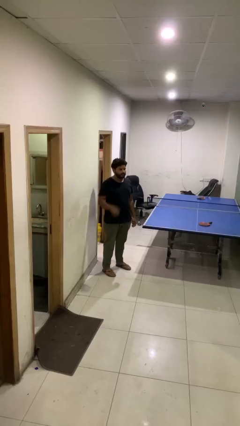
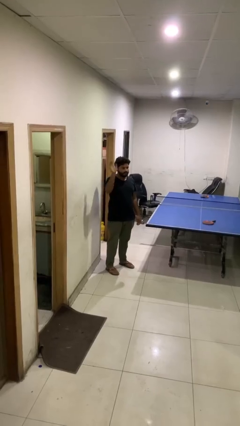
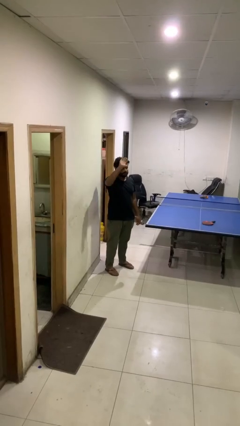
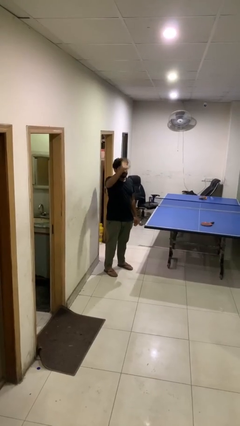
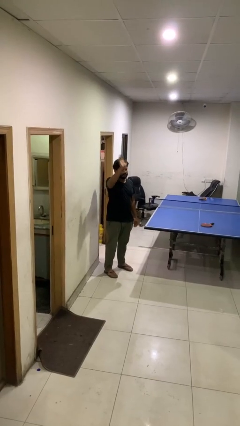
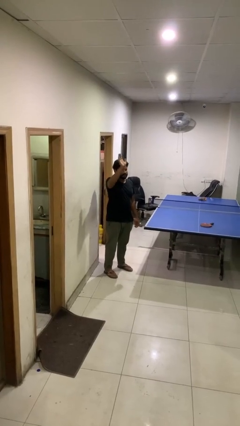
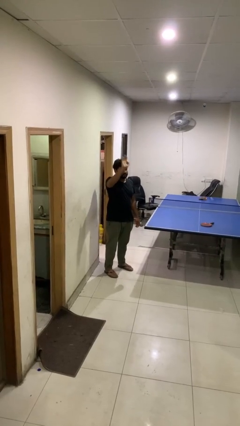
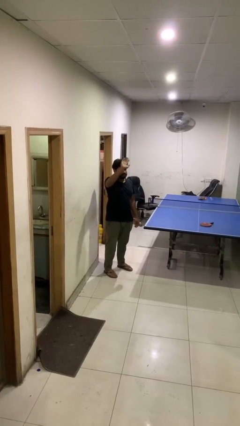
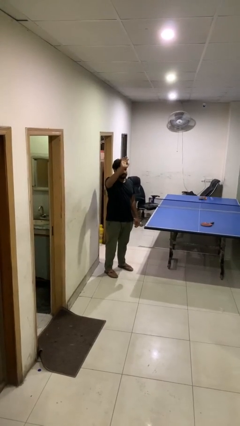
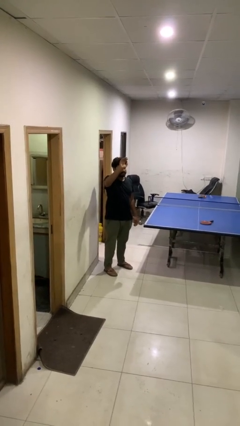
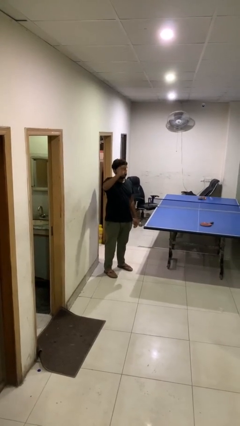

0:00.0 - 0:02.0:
person waves at person

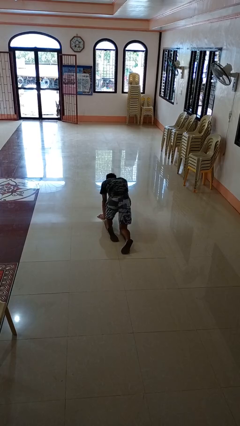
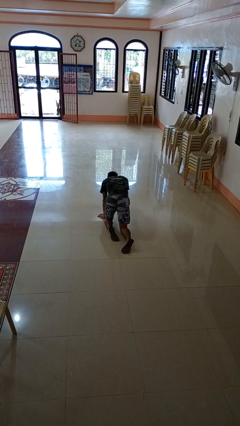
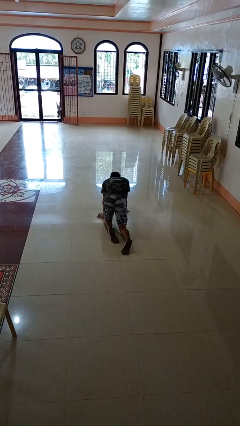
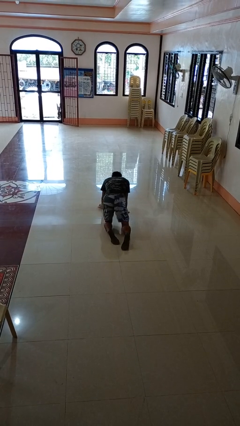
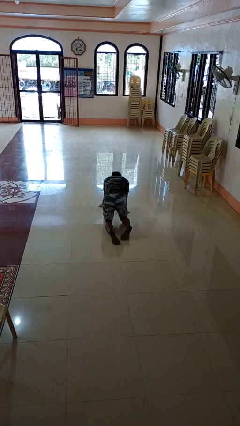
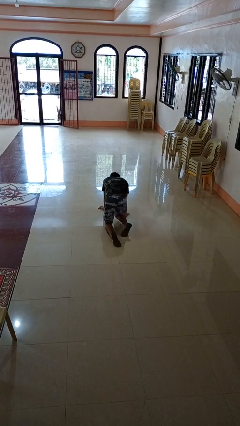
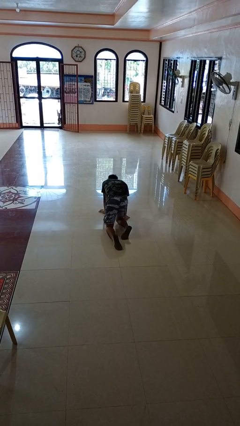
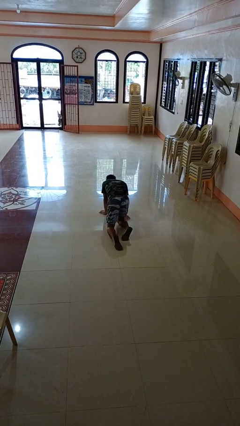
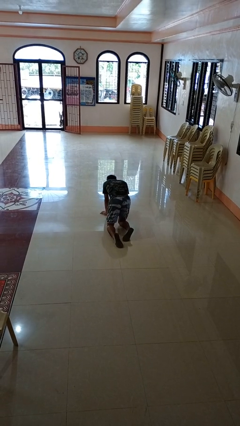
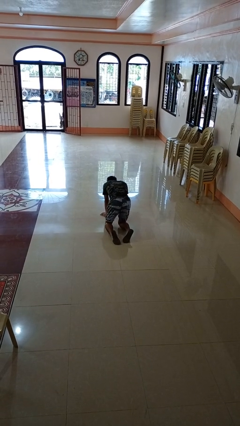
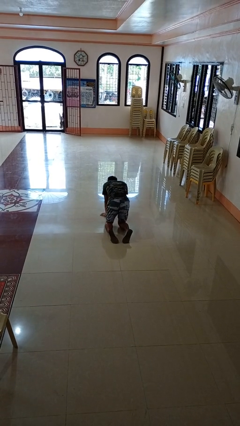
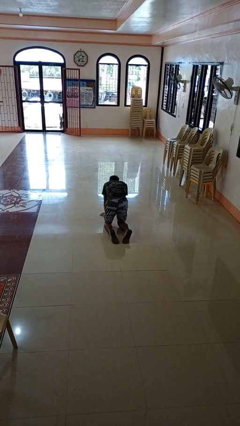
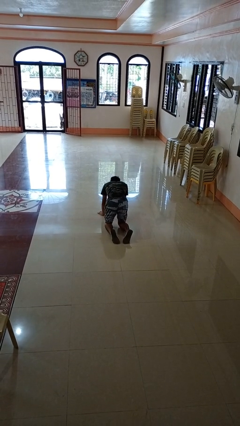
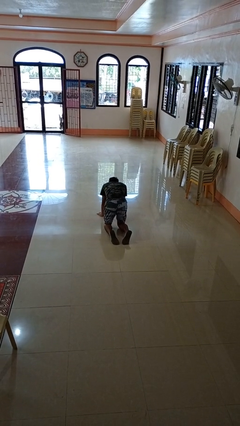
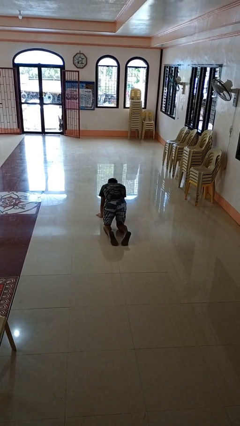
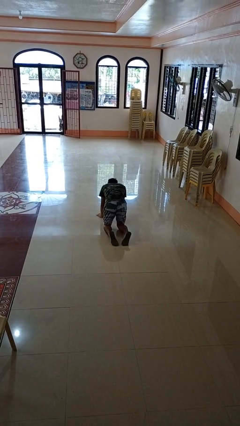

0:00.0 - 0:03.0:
person crawls

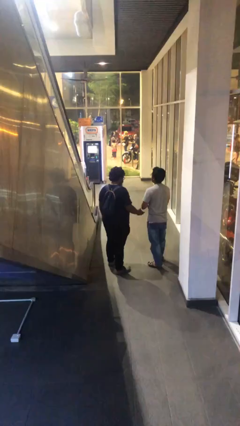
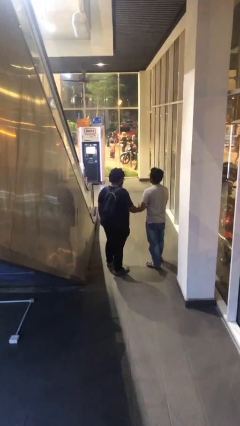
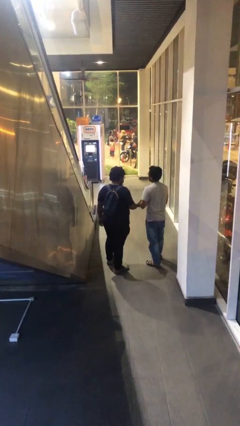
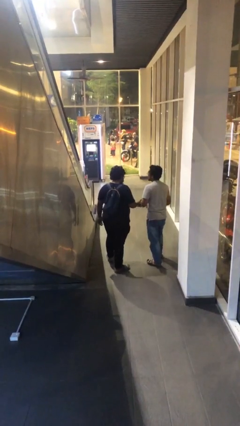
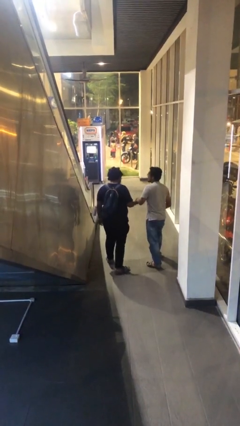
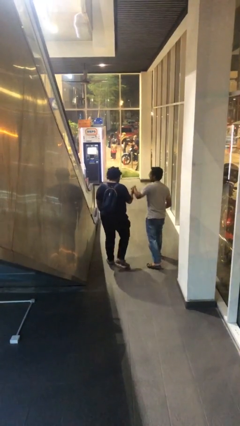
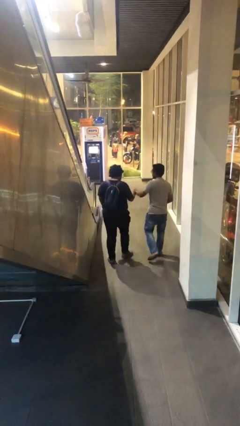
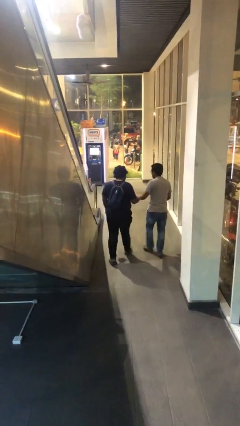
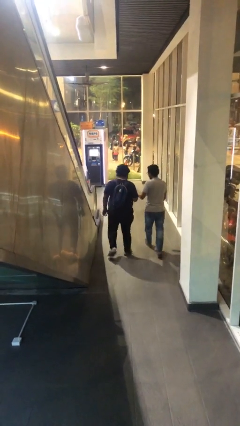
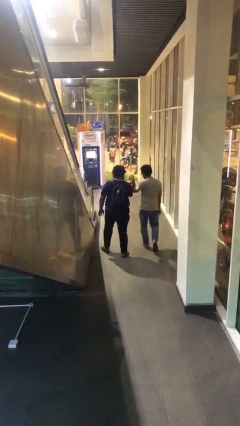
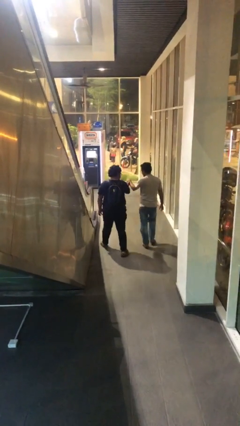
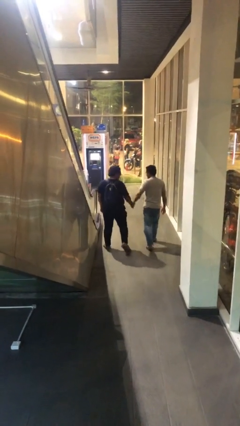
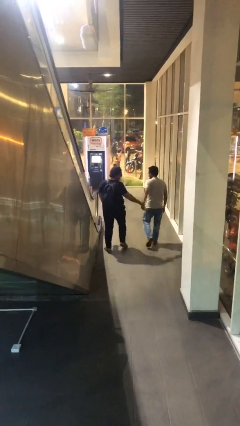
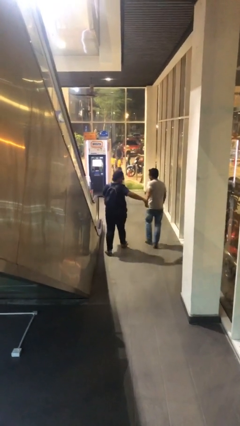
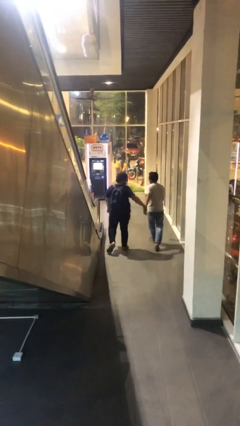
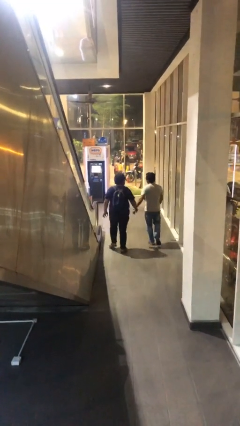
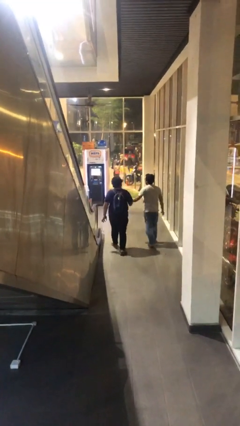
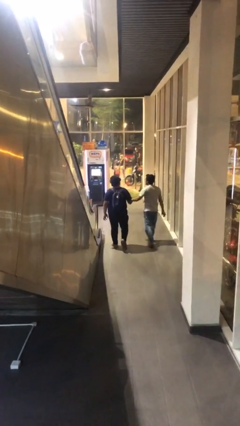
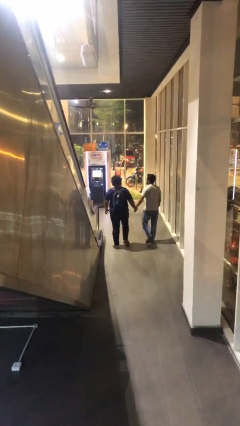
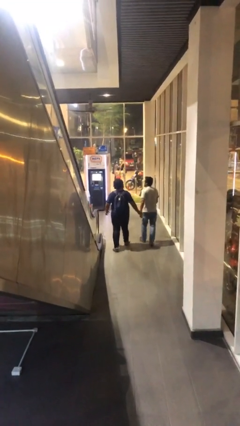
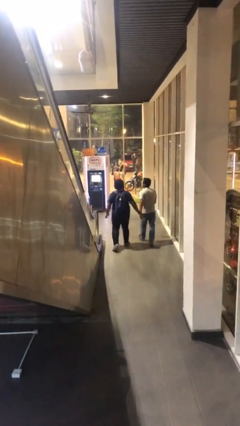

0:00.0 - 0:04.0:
person holds hand

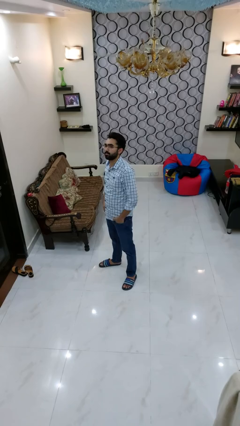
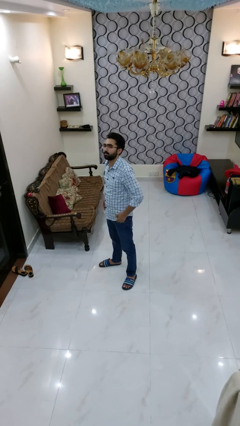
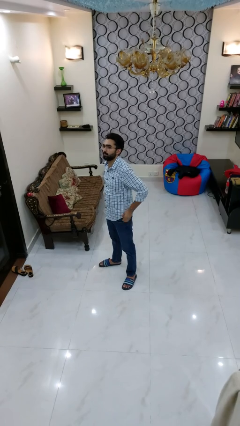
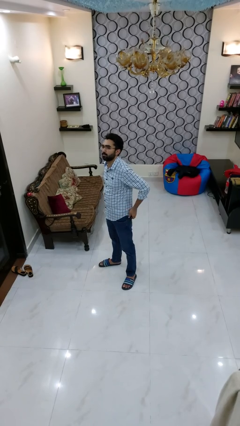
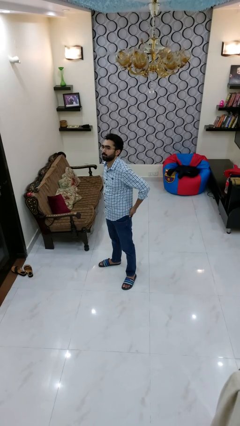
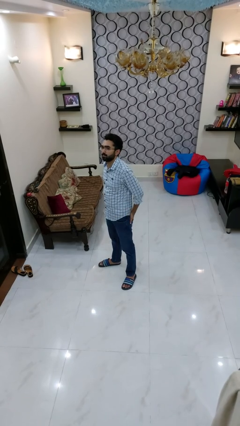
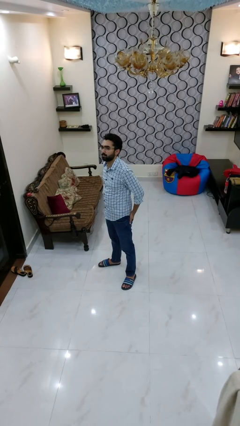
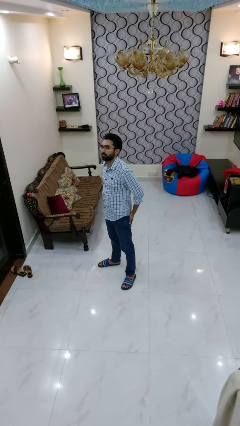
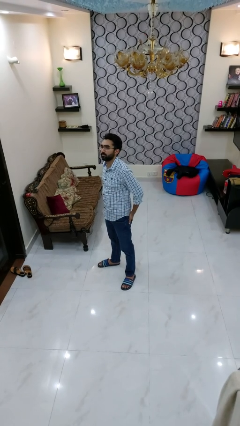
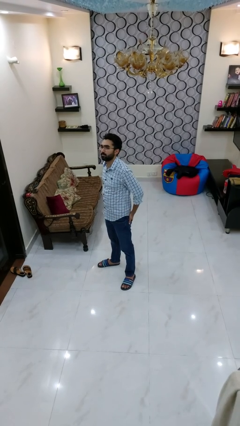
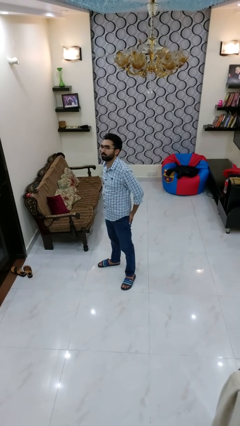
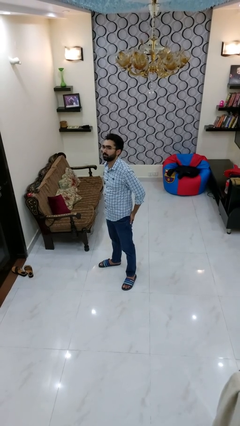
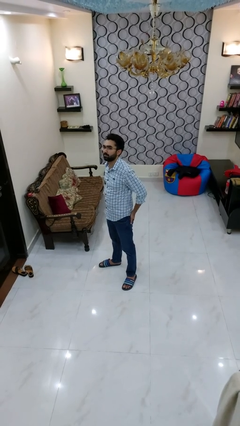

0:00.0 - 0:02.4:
person puts hands in back pockets

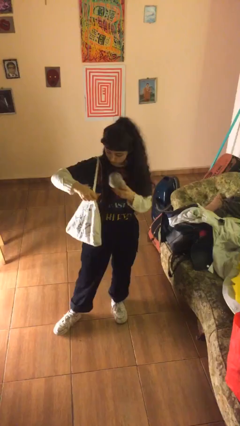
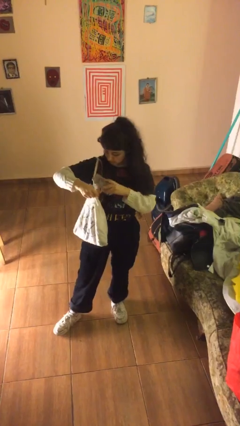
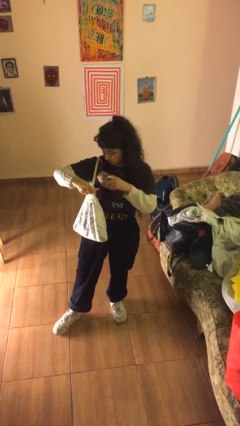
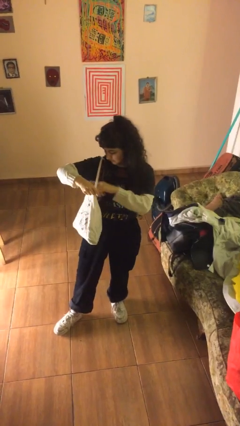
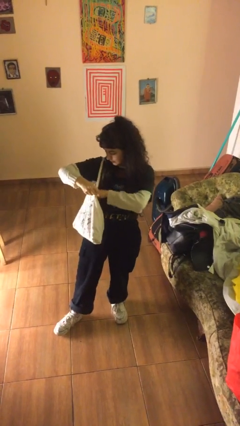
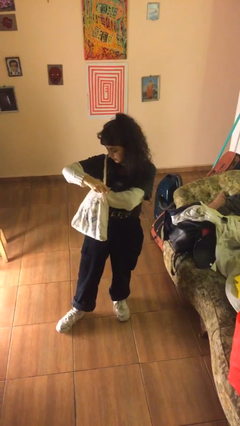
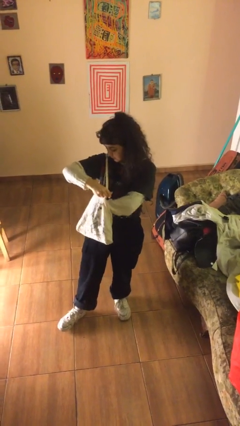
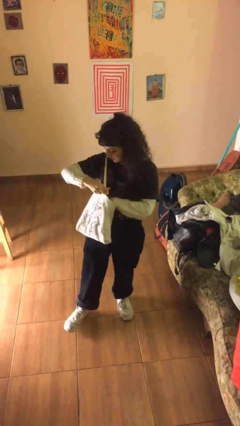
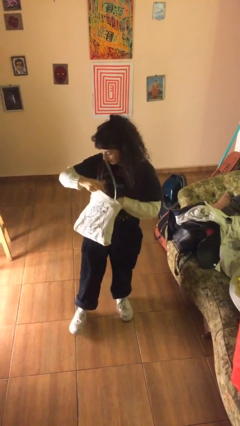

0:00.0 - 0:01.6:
person puts object into purse

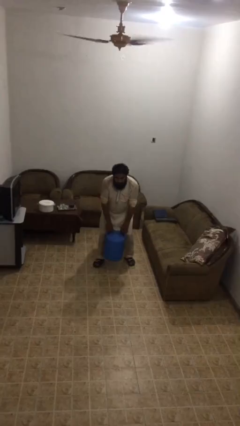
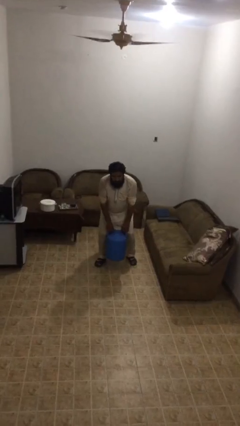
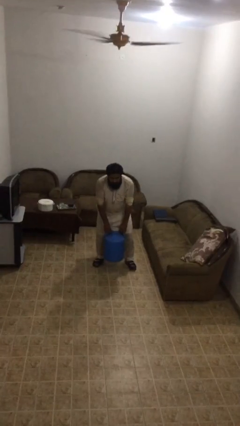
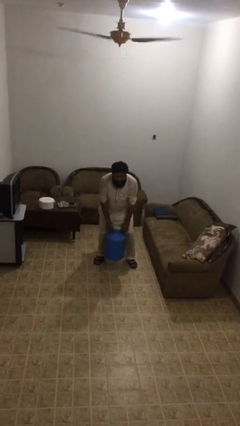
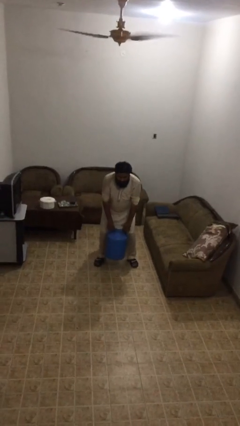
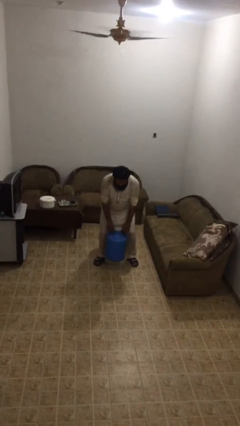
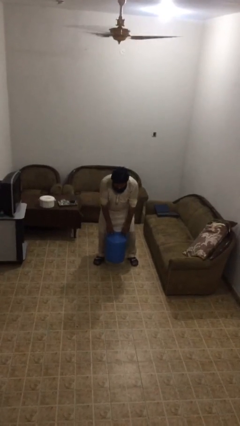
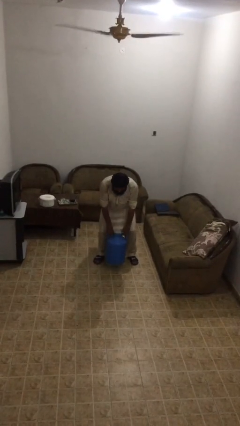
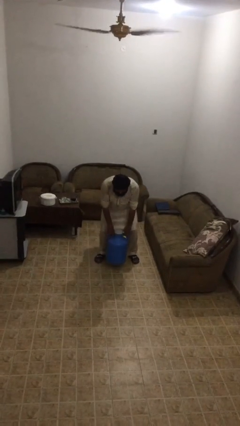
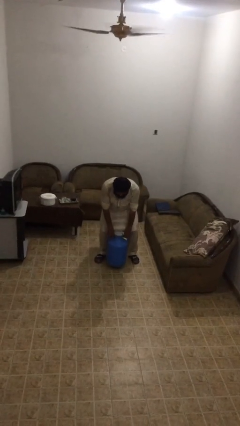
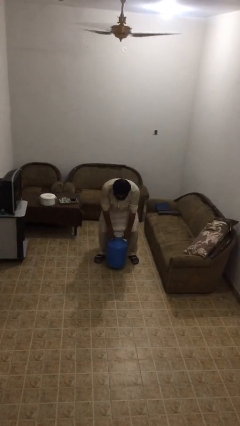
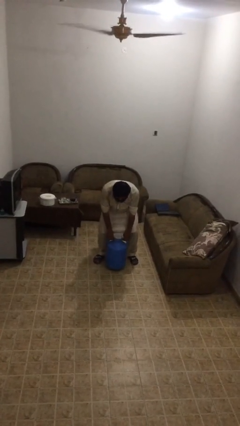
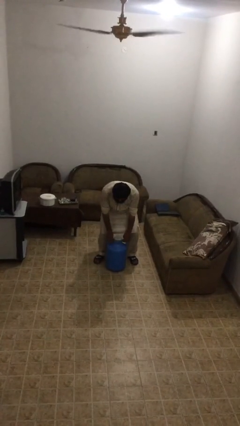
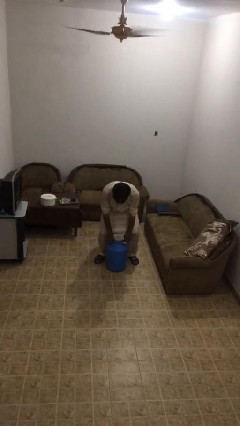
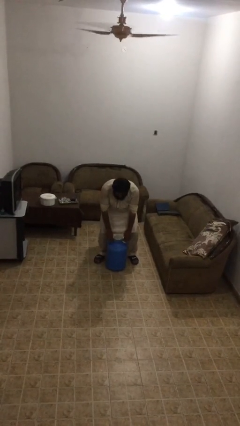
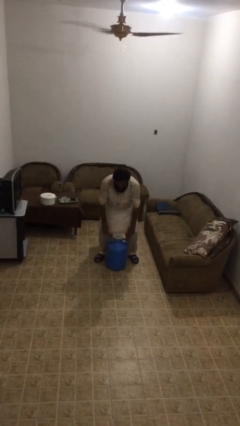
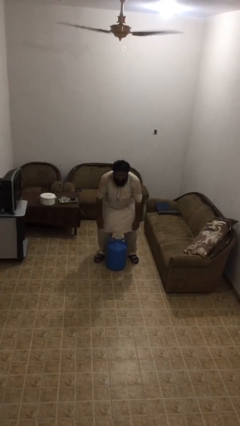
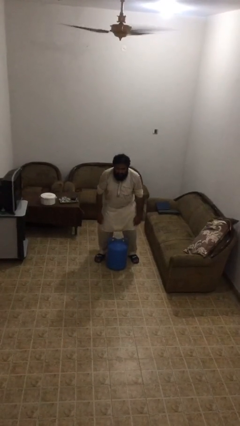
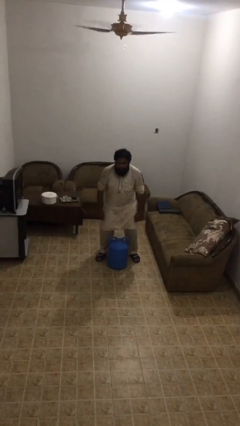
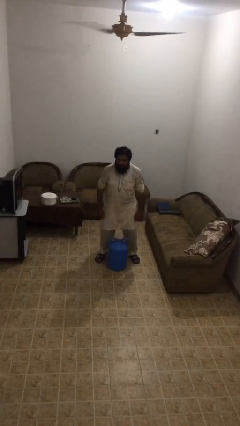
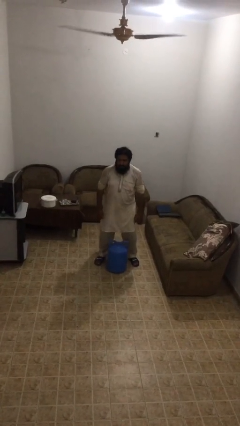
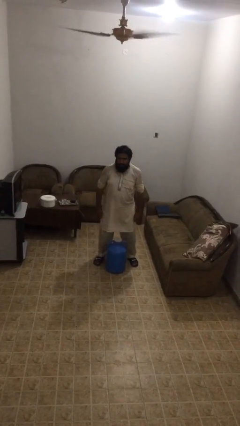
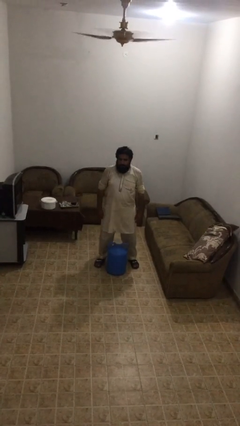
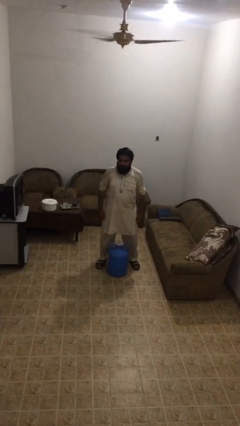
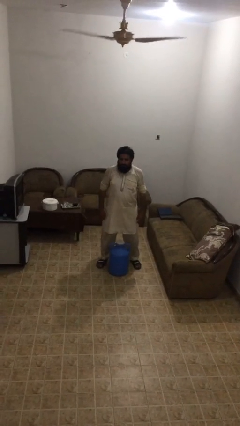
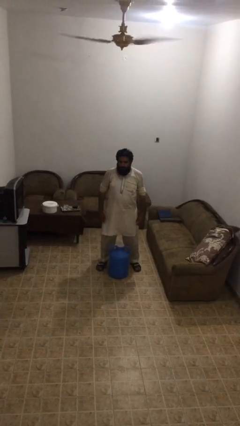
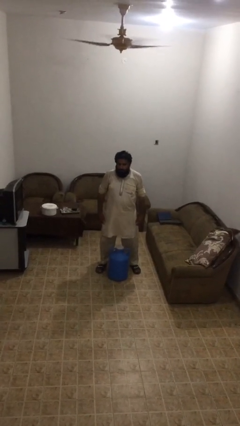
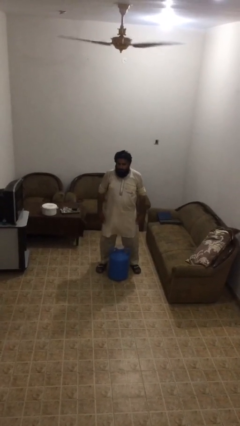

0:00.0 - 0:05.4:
person puts down object on floor
